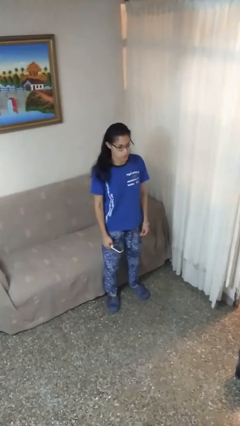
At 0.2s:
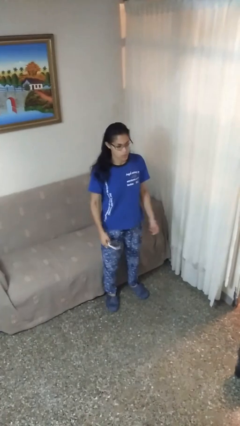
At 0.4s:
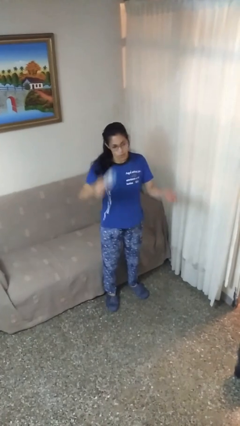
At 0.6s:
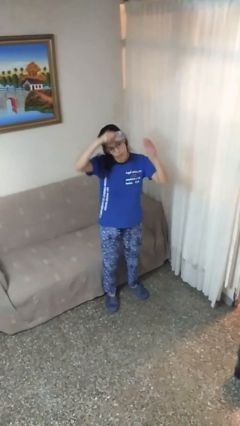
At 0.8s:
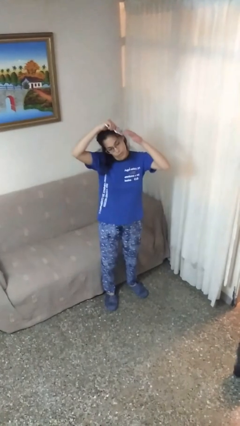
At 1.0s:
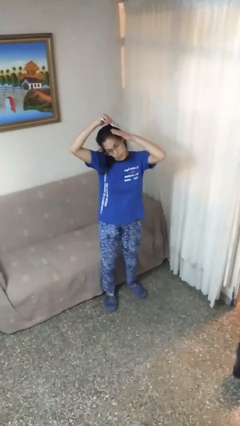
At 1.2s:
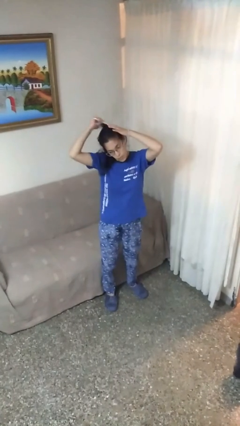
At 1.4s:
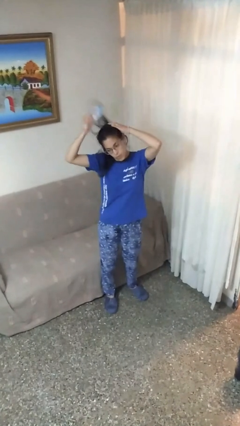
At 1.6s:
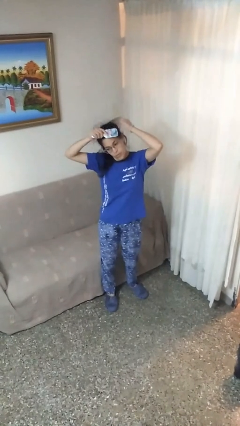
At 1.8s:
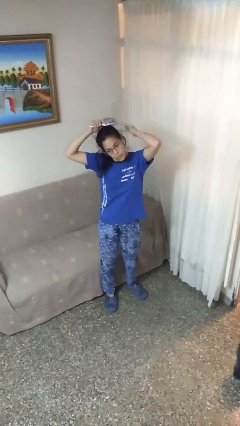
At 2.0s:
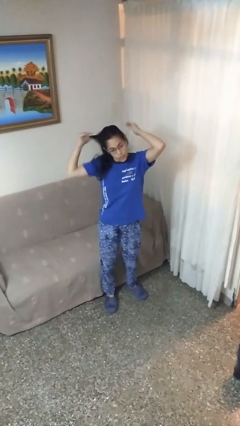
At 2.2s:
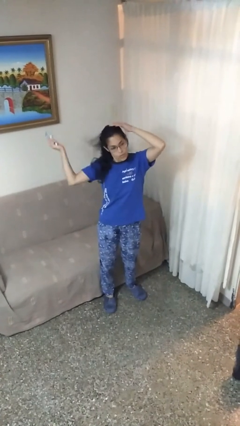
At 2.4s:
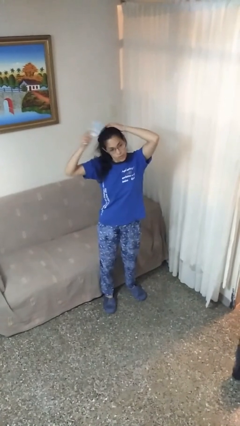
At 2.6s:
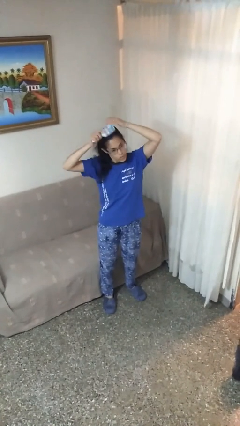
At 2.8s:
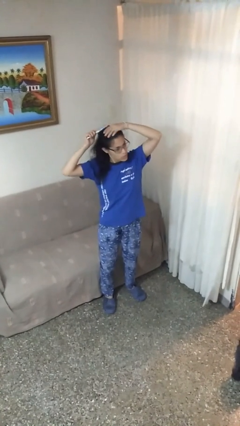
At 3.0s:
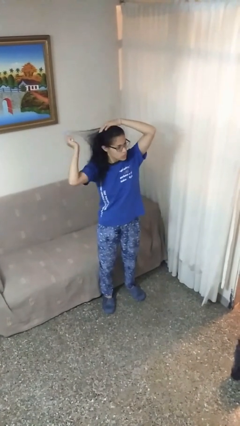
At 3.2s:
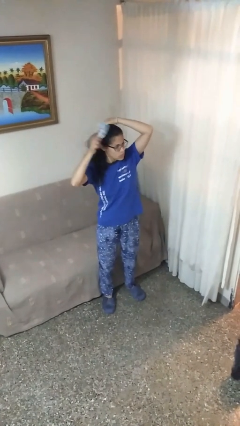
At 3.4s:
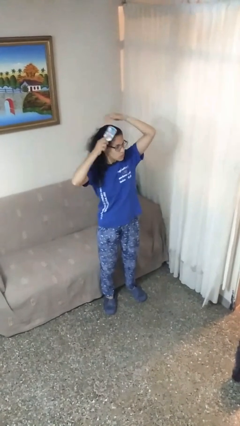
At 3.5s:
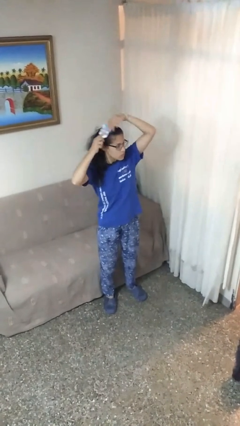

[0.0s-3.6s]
person brushes hair

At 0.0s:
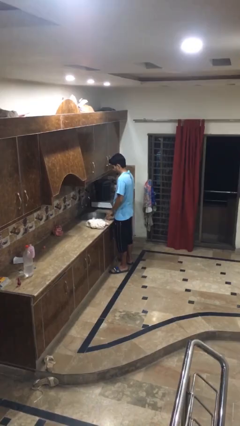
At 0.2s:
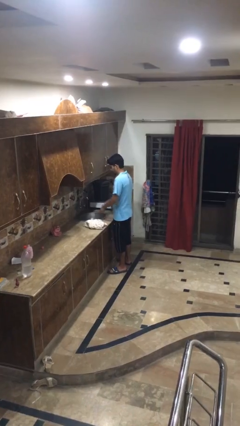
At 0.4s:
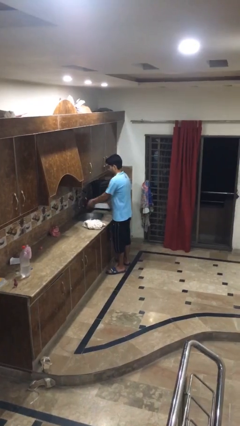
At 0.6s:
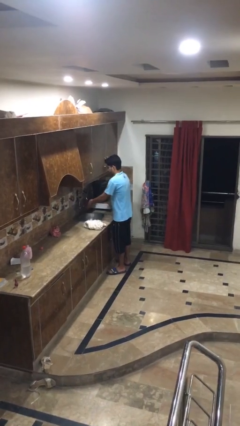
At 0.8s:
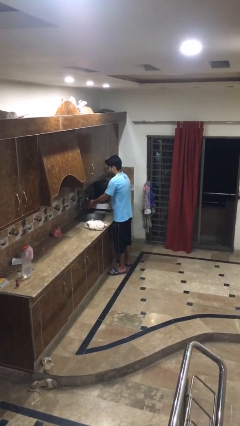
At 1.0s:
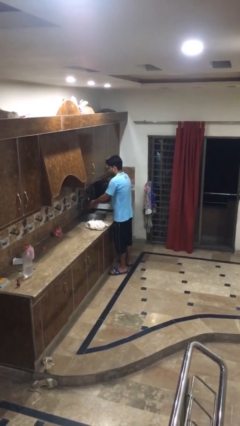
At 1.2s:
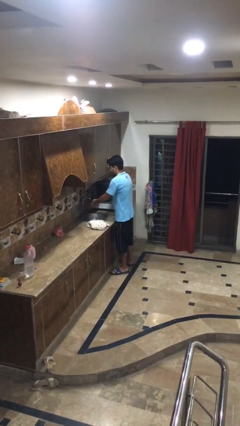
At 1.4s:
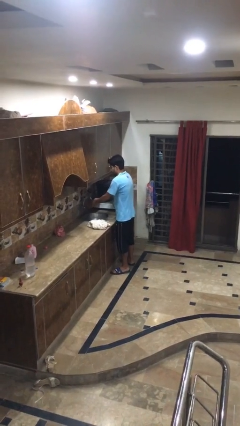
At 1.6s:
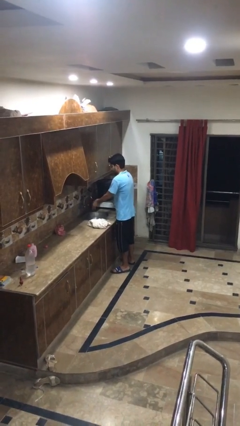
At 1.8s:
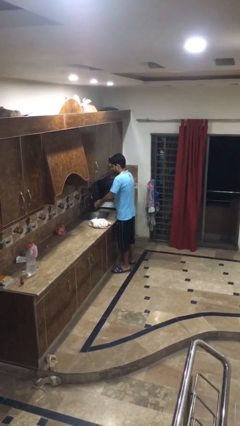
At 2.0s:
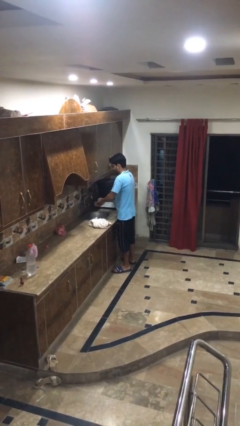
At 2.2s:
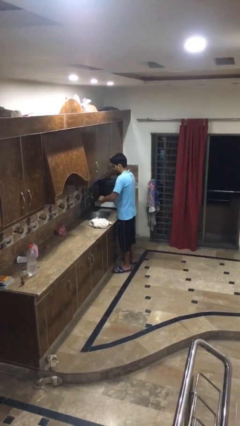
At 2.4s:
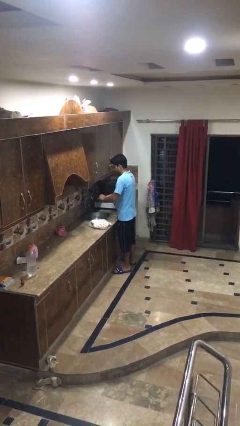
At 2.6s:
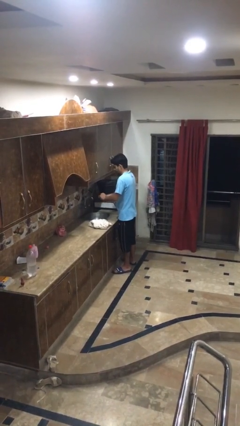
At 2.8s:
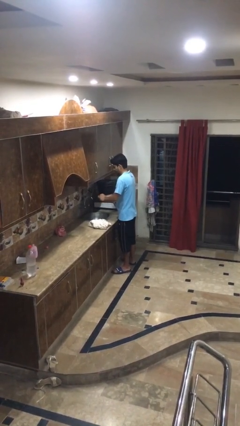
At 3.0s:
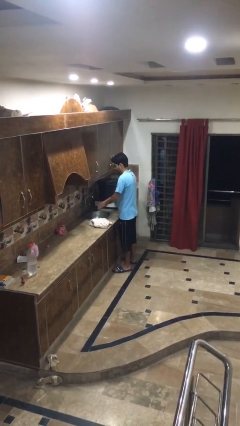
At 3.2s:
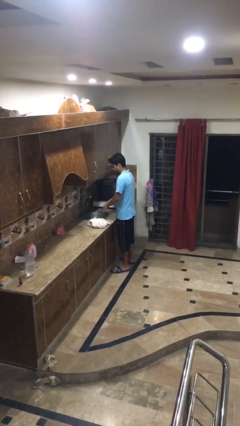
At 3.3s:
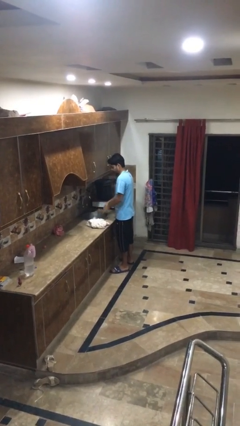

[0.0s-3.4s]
person washes hands

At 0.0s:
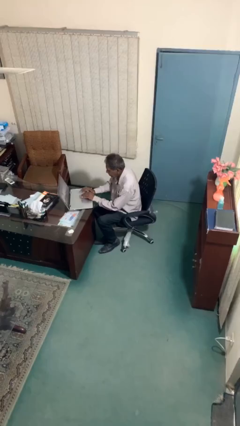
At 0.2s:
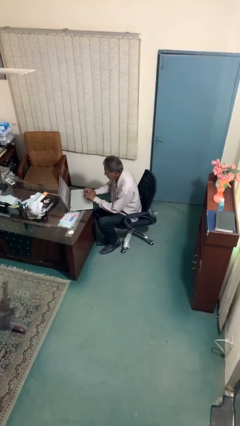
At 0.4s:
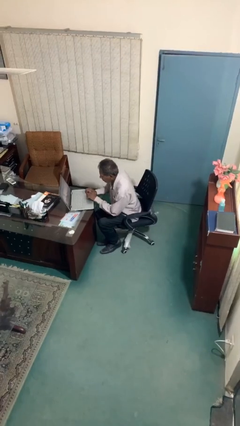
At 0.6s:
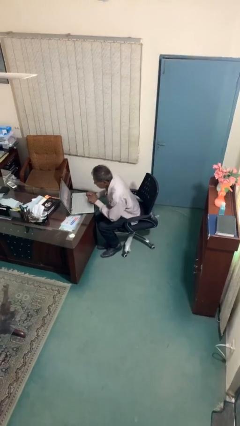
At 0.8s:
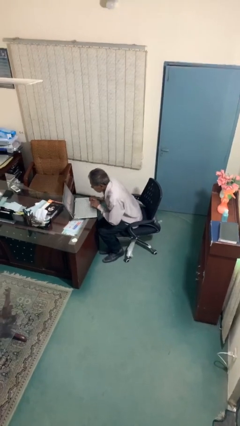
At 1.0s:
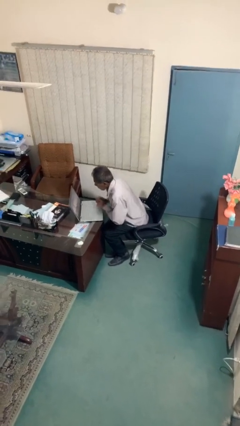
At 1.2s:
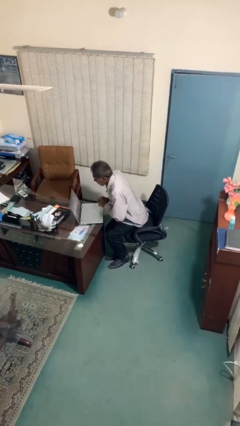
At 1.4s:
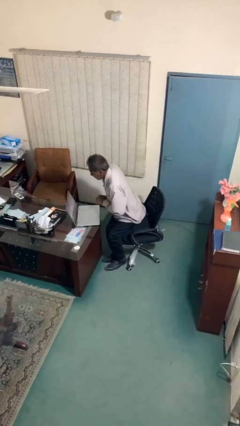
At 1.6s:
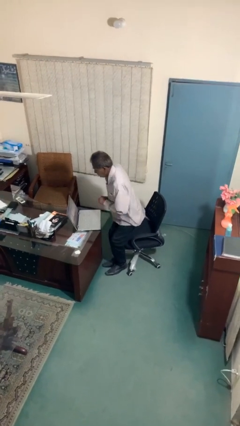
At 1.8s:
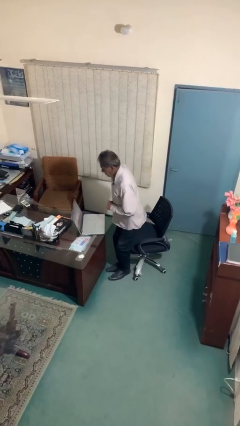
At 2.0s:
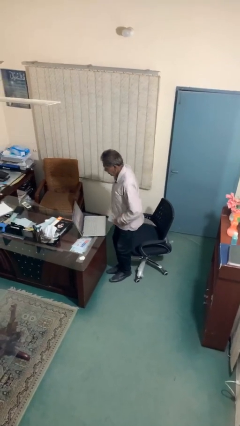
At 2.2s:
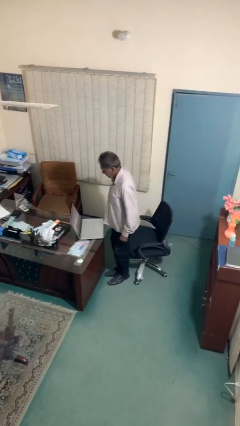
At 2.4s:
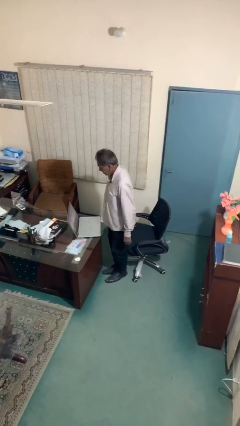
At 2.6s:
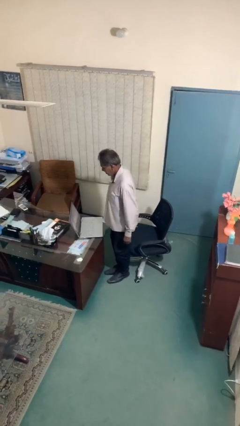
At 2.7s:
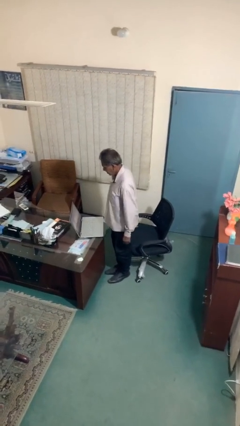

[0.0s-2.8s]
person stands up

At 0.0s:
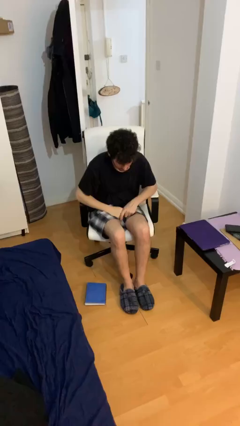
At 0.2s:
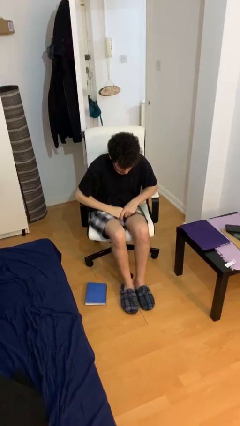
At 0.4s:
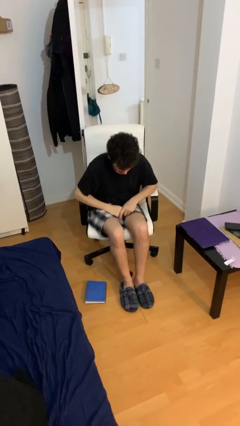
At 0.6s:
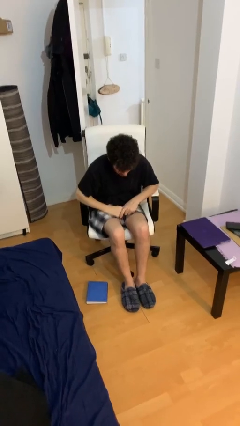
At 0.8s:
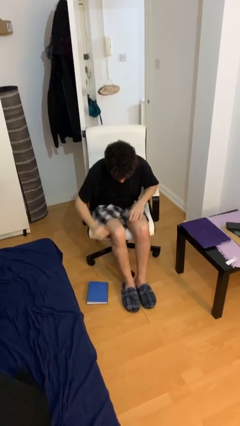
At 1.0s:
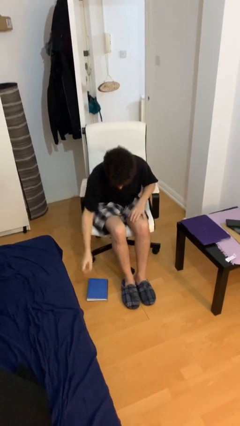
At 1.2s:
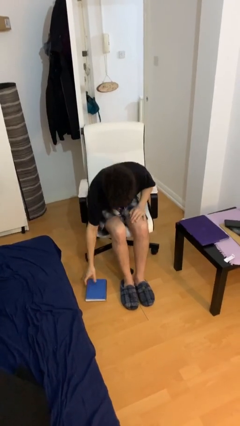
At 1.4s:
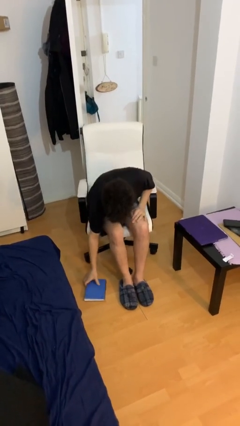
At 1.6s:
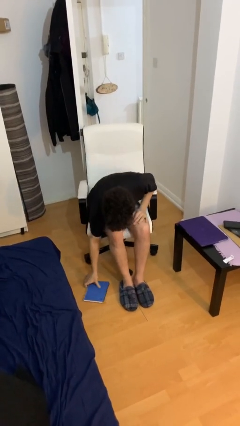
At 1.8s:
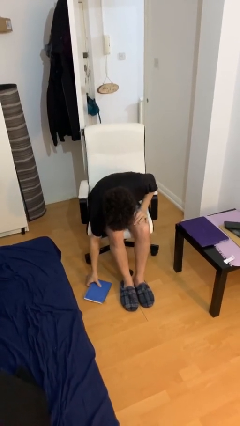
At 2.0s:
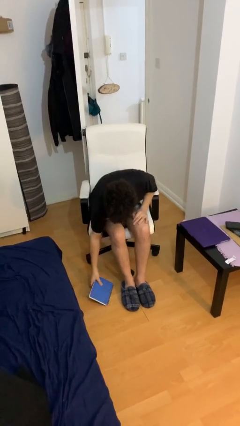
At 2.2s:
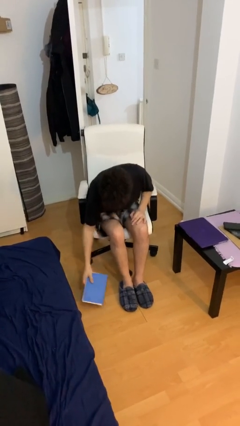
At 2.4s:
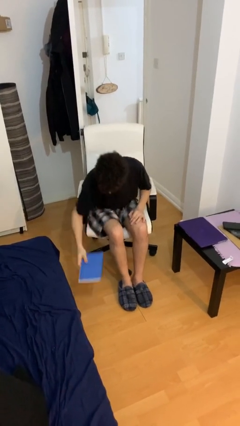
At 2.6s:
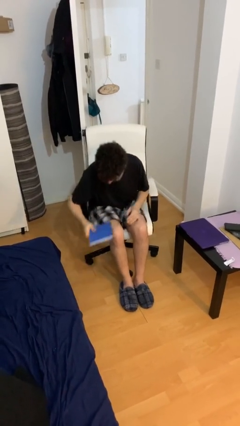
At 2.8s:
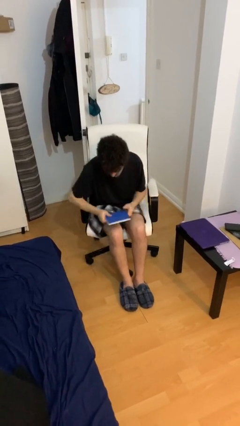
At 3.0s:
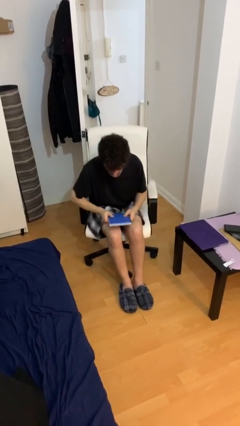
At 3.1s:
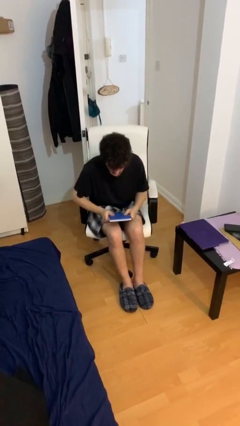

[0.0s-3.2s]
person picks up object from floor

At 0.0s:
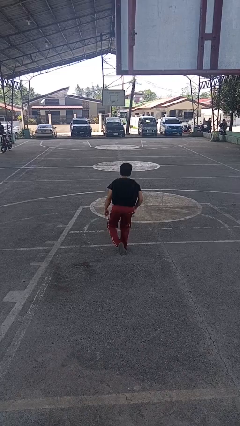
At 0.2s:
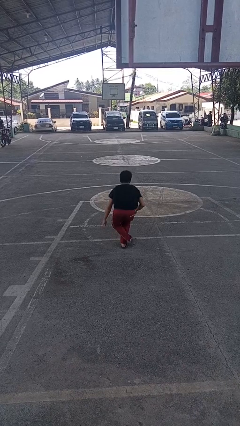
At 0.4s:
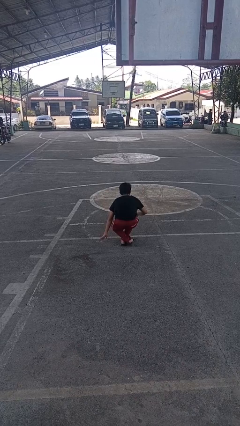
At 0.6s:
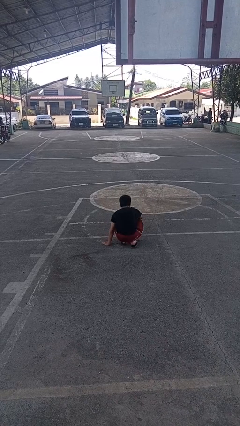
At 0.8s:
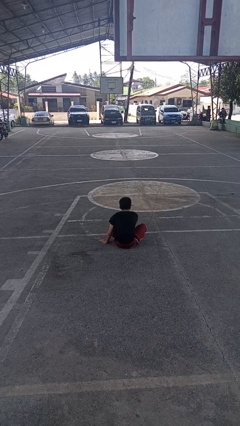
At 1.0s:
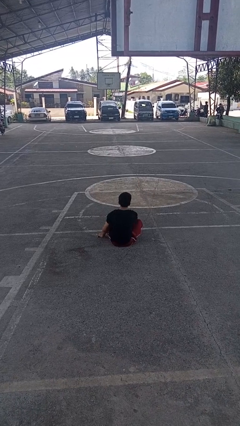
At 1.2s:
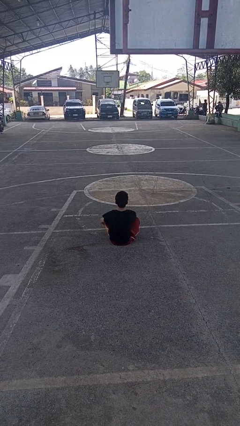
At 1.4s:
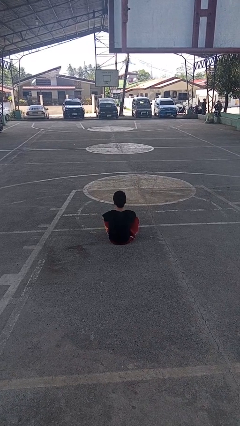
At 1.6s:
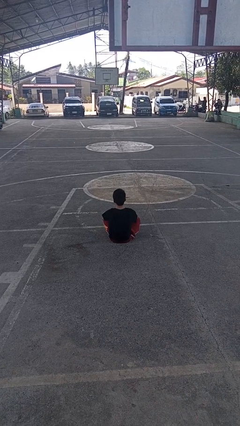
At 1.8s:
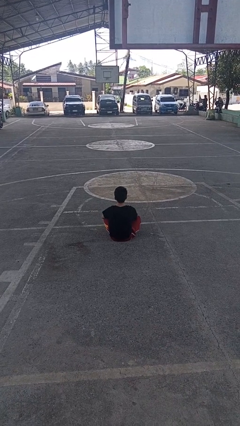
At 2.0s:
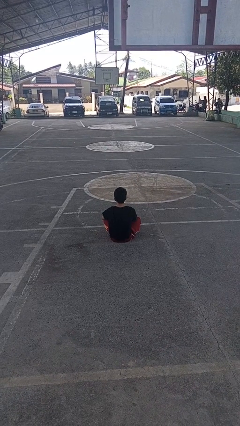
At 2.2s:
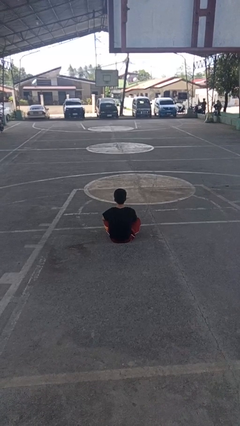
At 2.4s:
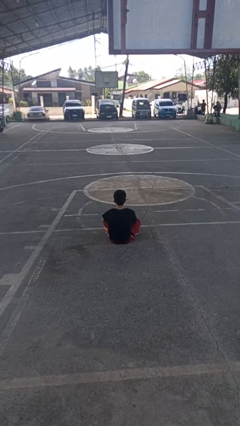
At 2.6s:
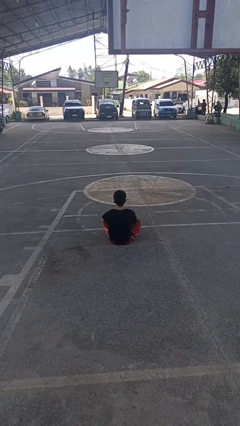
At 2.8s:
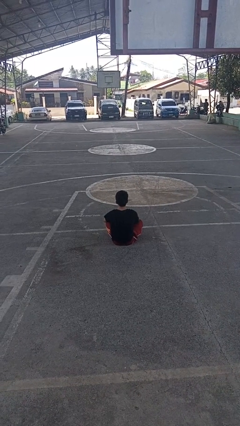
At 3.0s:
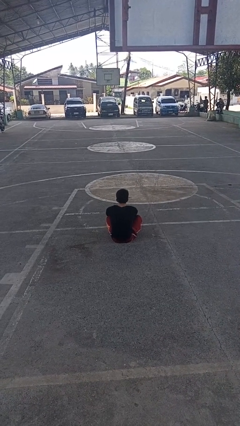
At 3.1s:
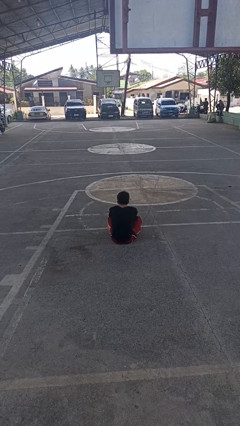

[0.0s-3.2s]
person sits crisscross

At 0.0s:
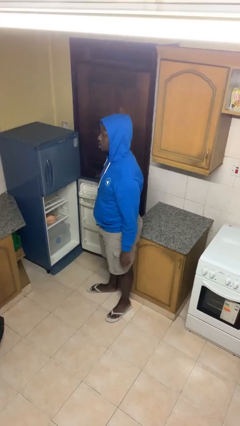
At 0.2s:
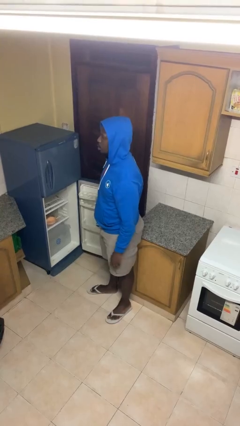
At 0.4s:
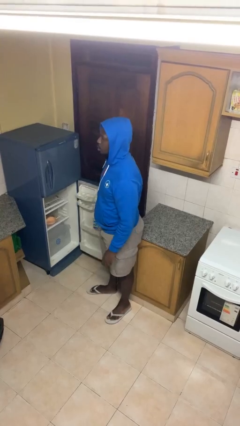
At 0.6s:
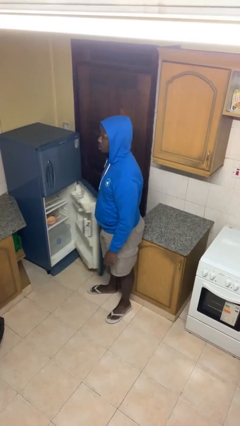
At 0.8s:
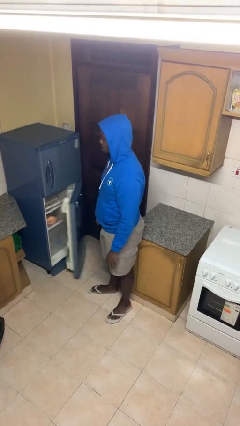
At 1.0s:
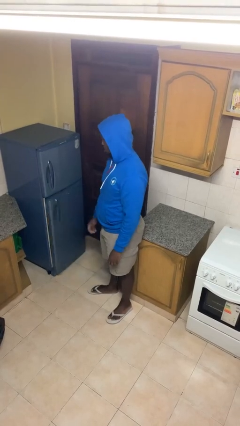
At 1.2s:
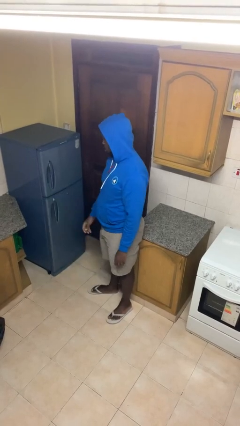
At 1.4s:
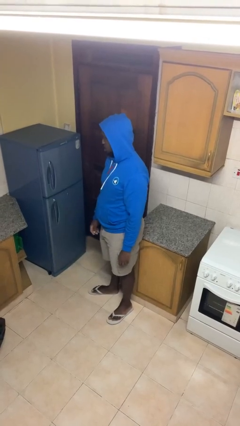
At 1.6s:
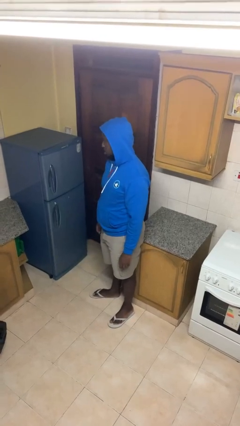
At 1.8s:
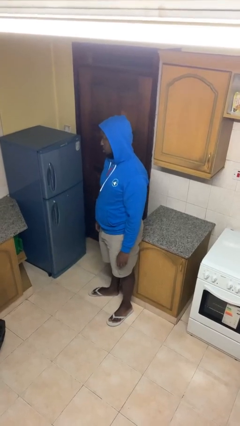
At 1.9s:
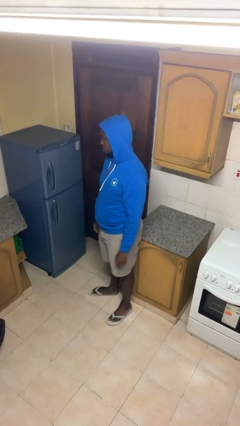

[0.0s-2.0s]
person closes refrigerator
